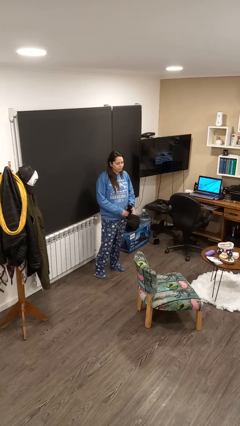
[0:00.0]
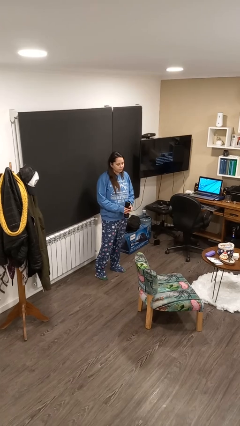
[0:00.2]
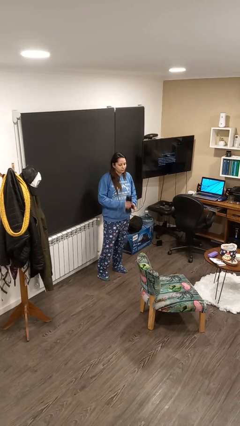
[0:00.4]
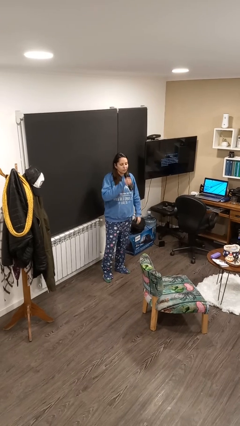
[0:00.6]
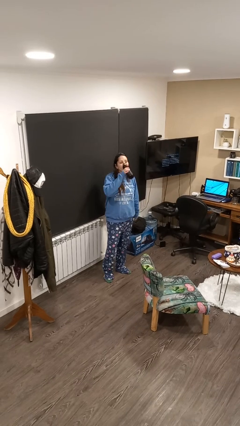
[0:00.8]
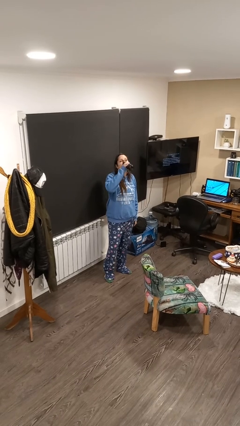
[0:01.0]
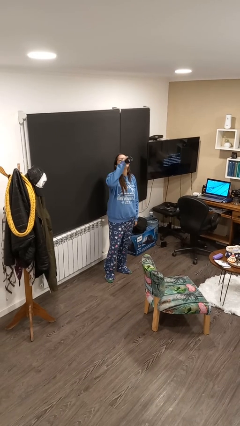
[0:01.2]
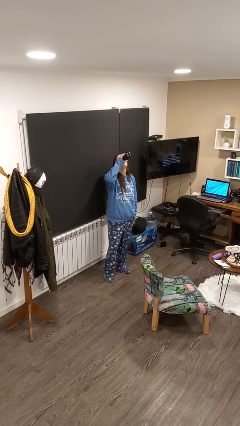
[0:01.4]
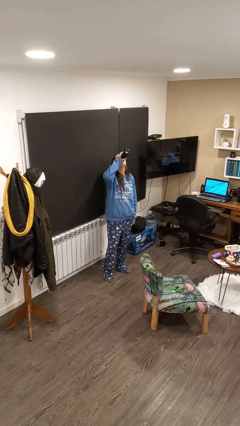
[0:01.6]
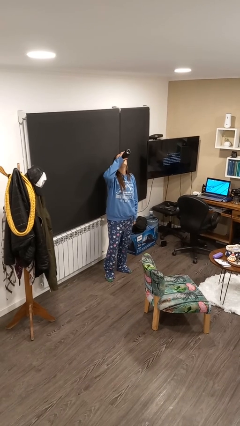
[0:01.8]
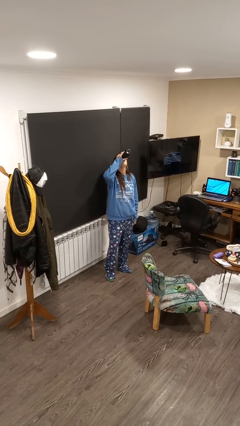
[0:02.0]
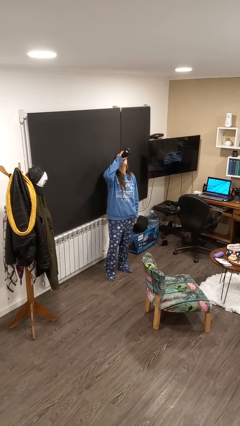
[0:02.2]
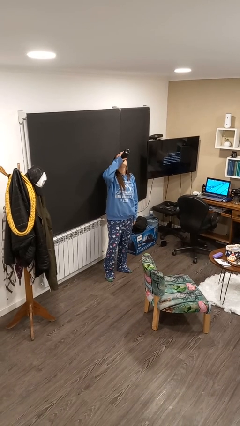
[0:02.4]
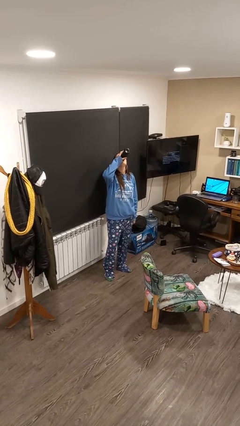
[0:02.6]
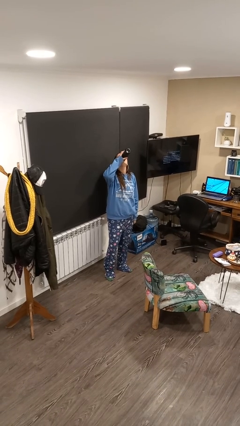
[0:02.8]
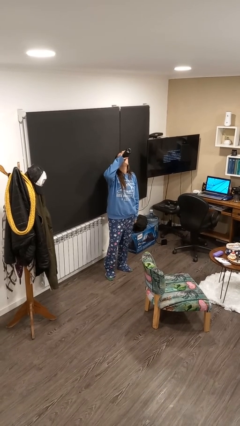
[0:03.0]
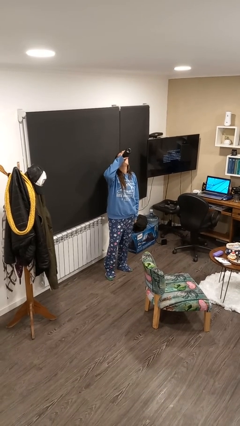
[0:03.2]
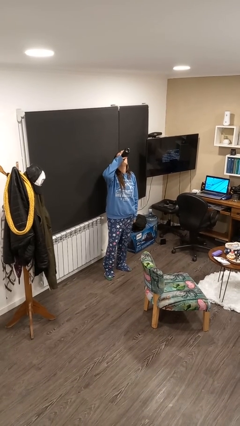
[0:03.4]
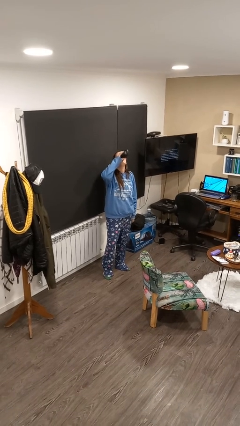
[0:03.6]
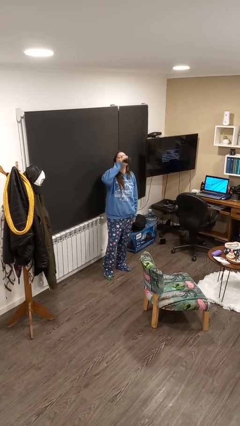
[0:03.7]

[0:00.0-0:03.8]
person drinks from bottle

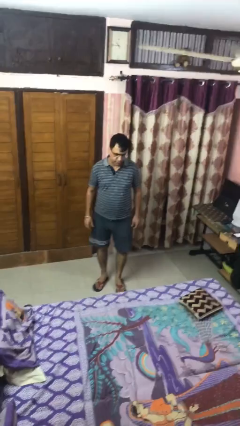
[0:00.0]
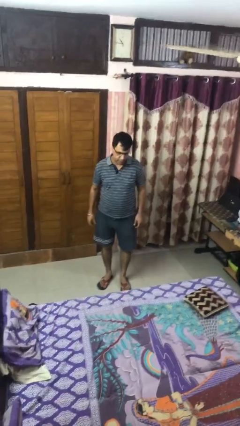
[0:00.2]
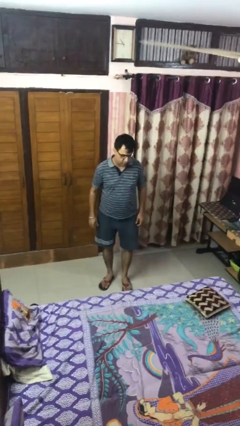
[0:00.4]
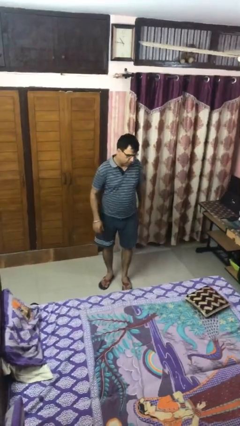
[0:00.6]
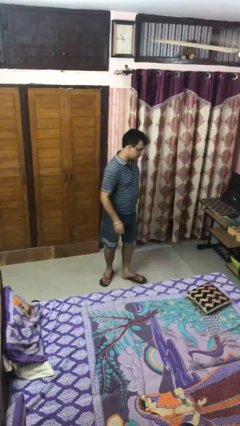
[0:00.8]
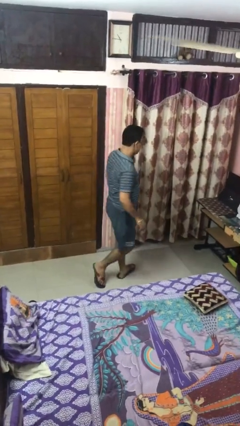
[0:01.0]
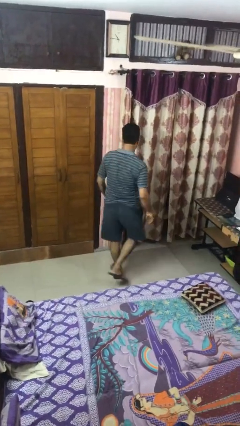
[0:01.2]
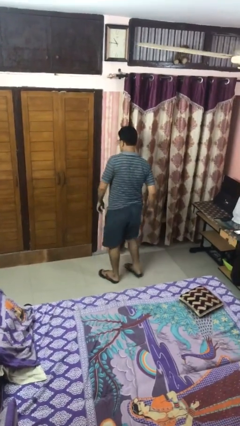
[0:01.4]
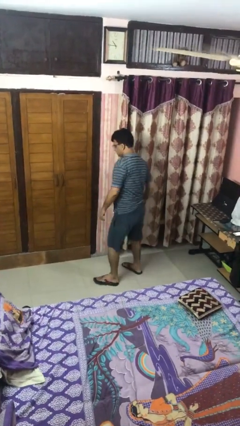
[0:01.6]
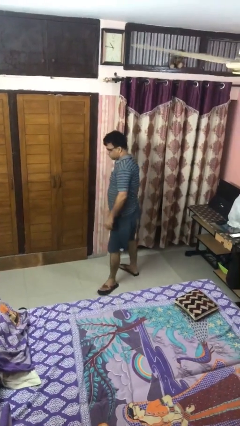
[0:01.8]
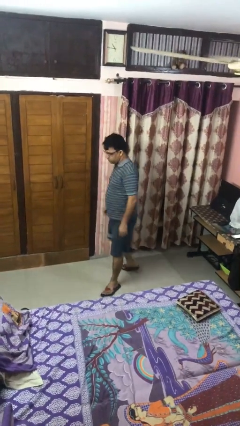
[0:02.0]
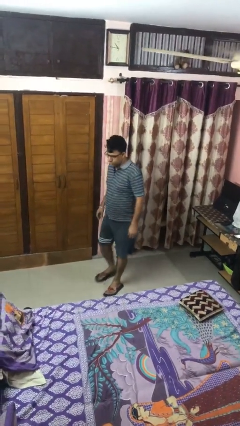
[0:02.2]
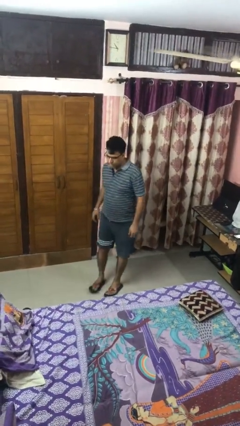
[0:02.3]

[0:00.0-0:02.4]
person twirls

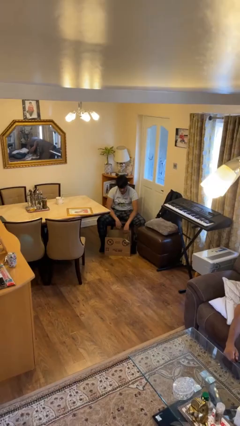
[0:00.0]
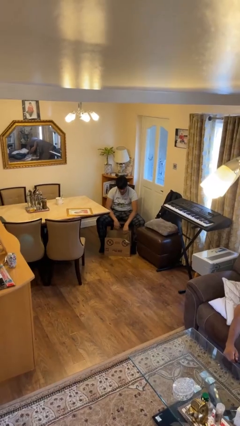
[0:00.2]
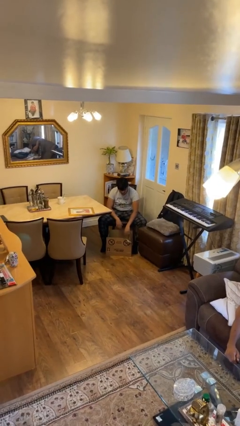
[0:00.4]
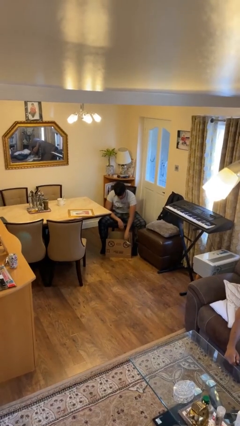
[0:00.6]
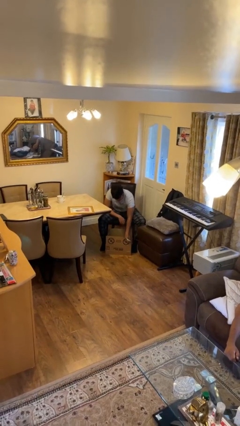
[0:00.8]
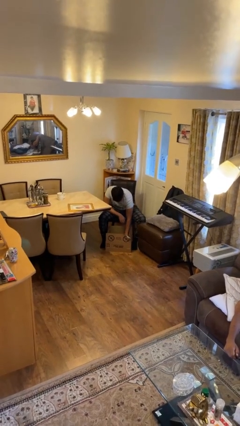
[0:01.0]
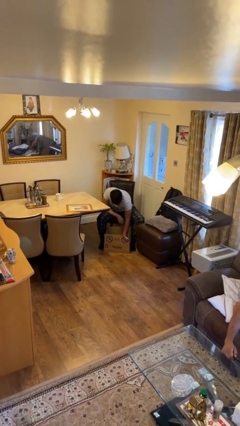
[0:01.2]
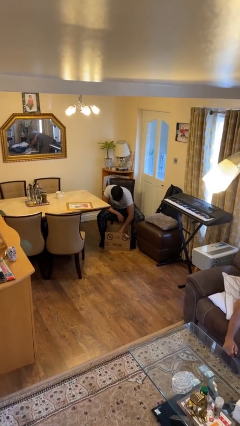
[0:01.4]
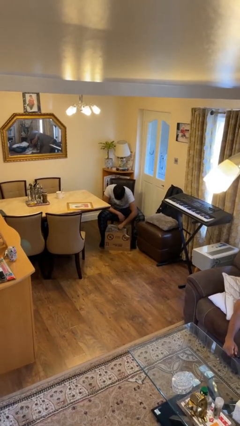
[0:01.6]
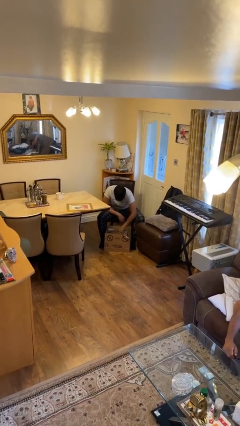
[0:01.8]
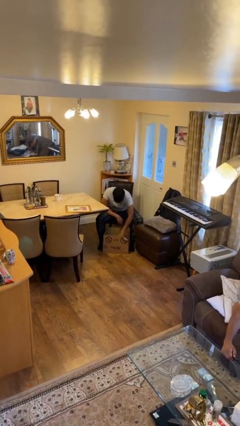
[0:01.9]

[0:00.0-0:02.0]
person searches in box

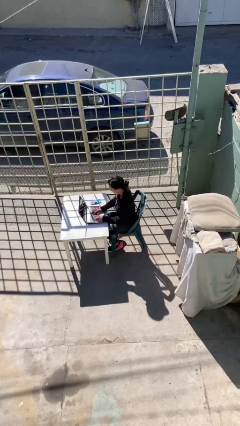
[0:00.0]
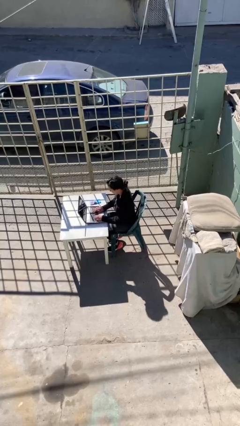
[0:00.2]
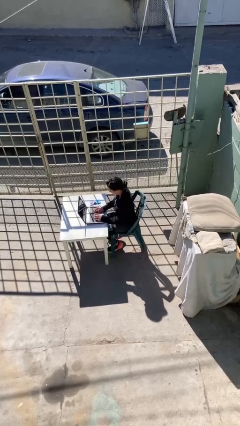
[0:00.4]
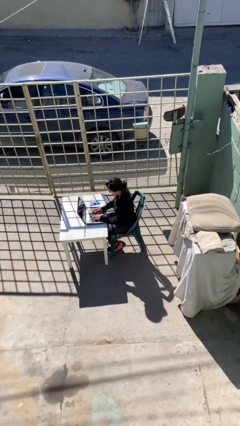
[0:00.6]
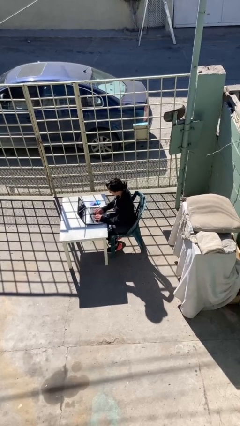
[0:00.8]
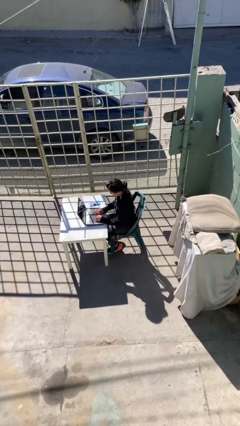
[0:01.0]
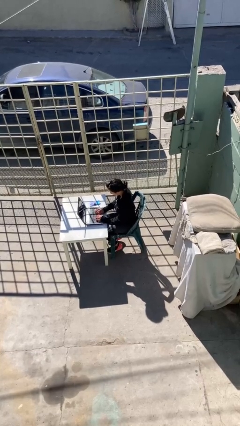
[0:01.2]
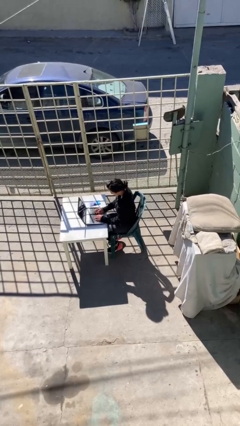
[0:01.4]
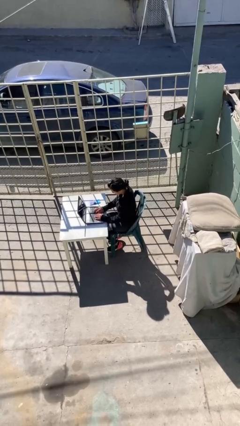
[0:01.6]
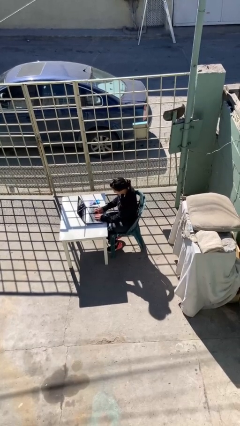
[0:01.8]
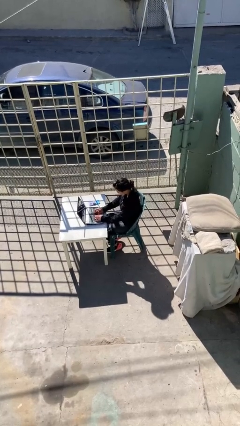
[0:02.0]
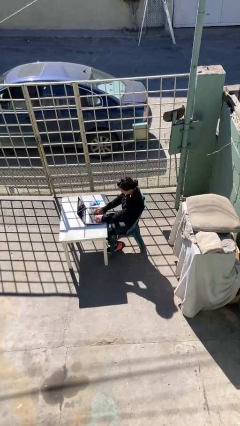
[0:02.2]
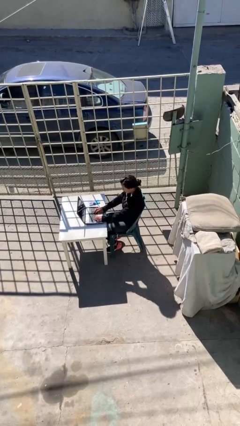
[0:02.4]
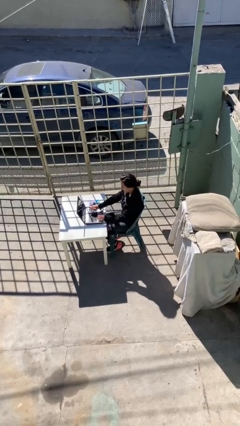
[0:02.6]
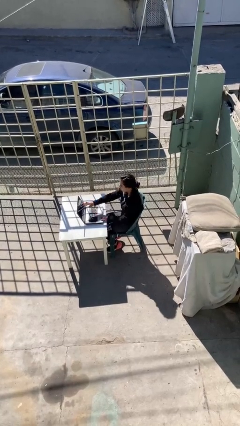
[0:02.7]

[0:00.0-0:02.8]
person interacts with laptop

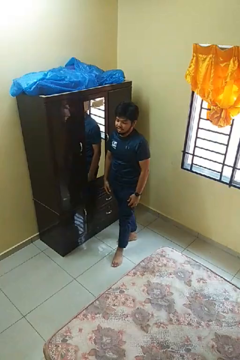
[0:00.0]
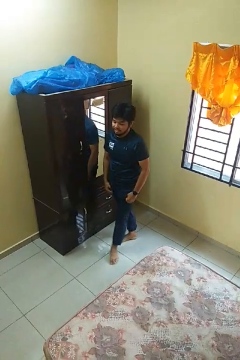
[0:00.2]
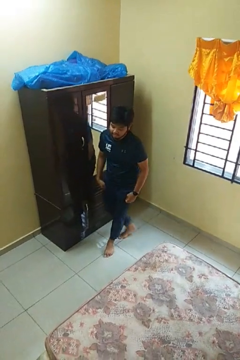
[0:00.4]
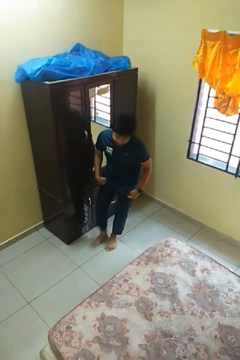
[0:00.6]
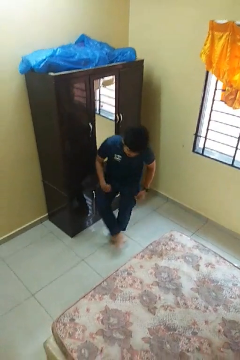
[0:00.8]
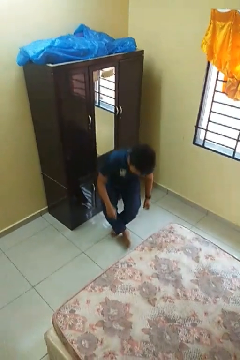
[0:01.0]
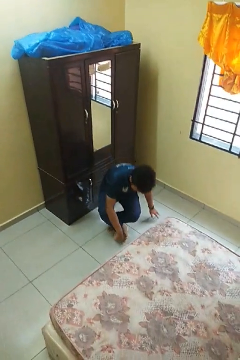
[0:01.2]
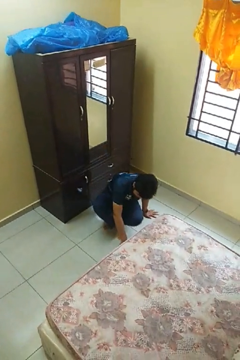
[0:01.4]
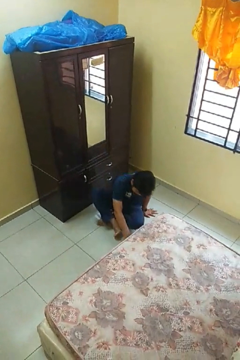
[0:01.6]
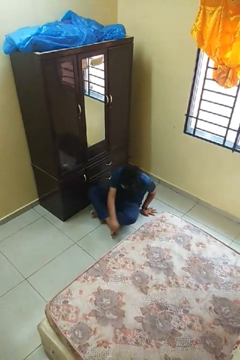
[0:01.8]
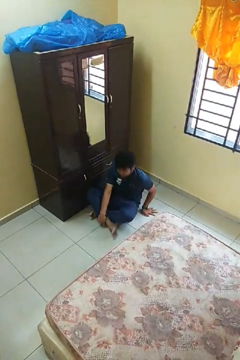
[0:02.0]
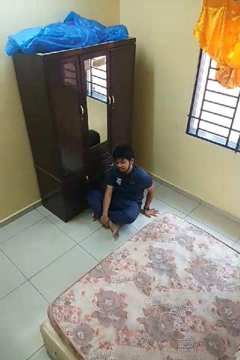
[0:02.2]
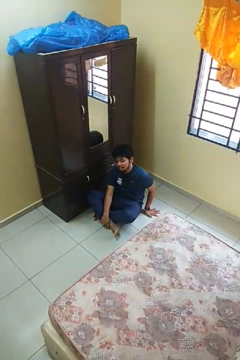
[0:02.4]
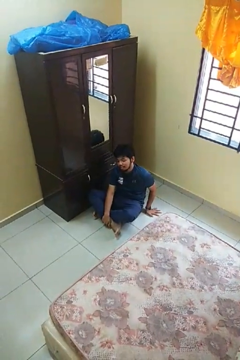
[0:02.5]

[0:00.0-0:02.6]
person sits crisscross

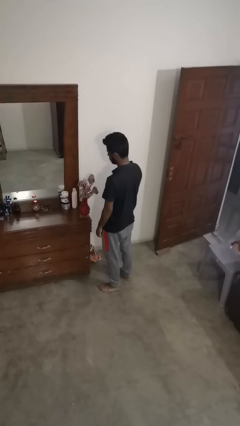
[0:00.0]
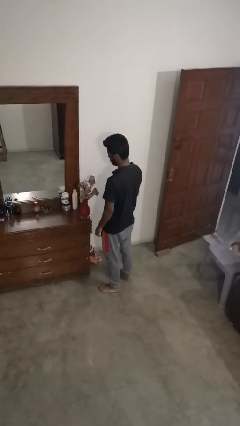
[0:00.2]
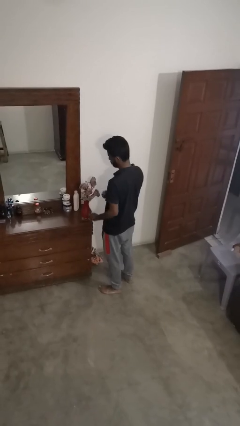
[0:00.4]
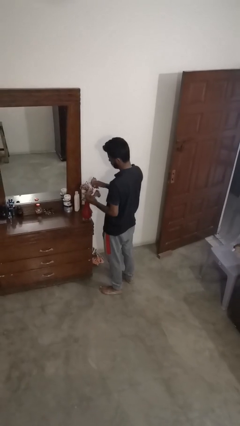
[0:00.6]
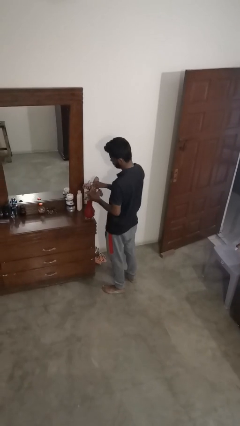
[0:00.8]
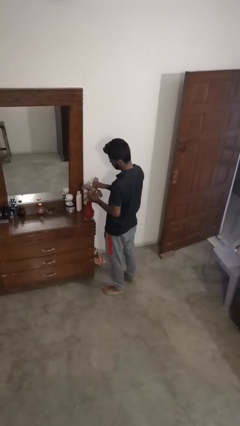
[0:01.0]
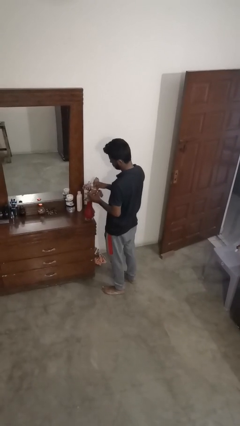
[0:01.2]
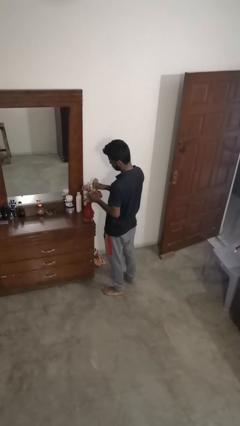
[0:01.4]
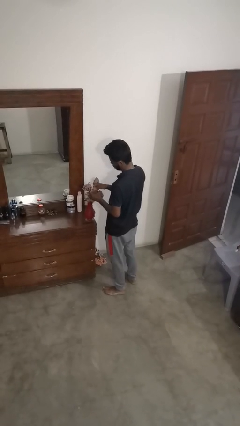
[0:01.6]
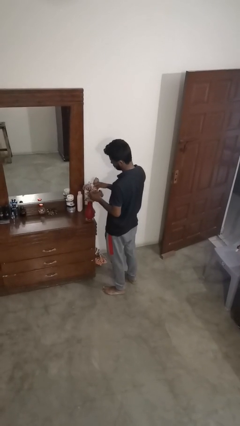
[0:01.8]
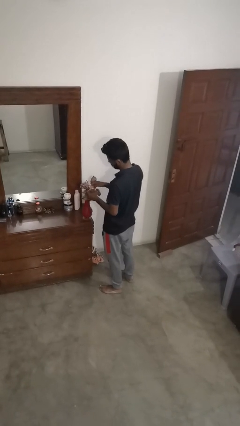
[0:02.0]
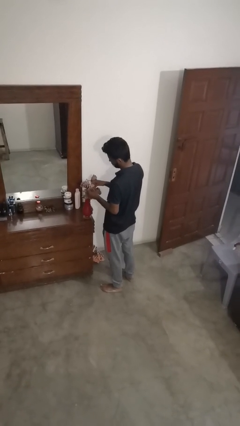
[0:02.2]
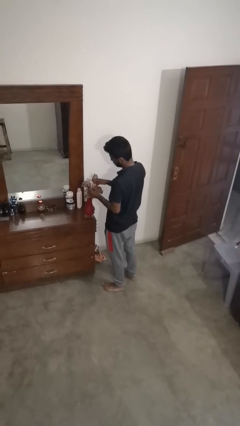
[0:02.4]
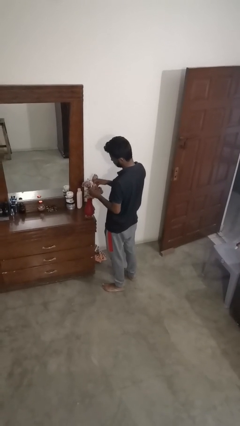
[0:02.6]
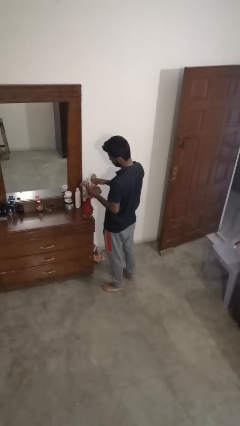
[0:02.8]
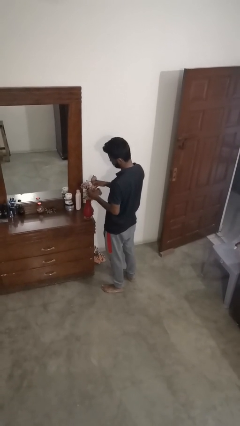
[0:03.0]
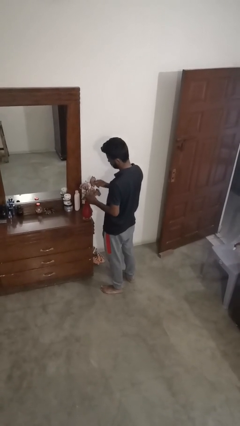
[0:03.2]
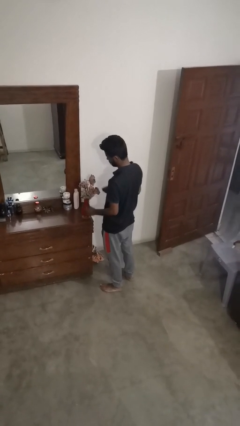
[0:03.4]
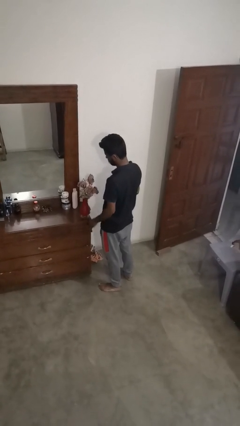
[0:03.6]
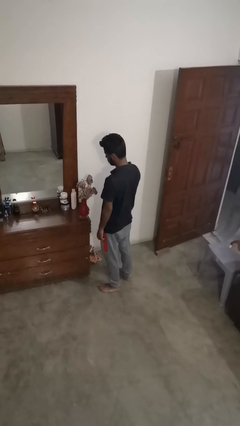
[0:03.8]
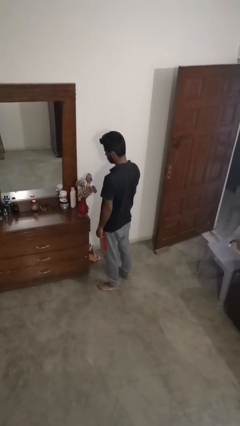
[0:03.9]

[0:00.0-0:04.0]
person arranges flowers in vase

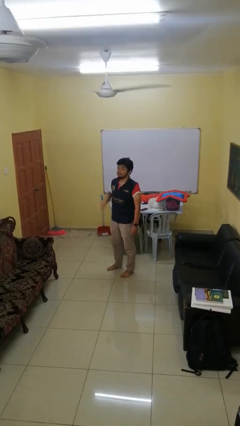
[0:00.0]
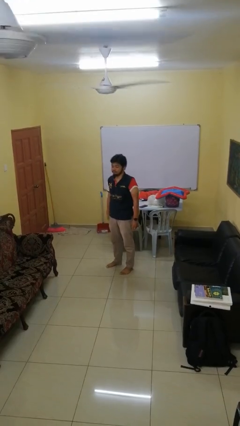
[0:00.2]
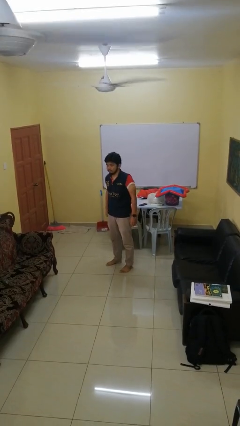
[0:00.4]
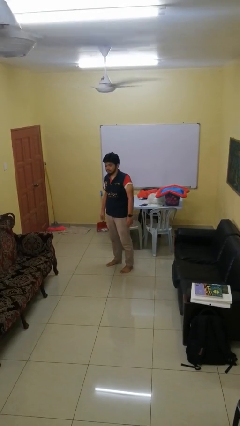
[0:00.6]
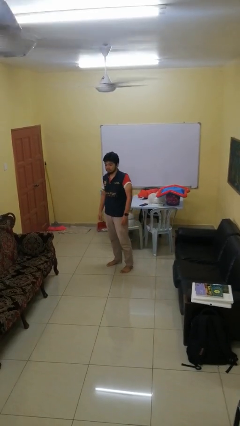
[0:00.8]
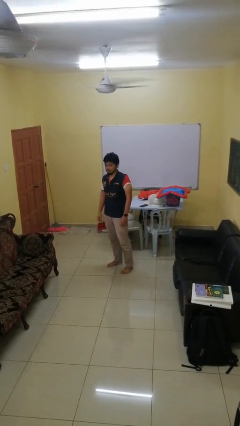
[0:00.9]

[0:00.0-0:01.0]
person gestures lower hand
